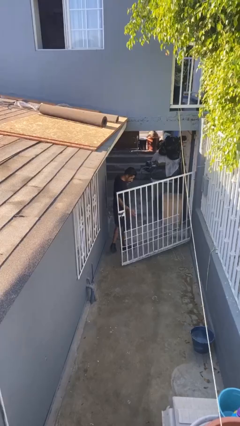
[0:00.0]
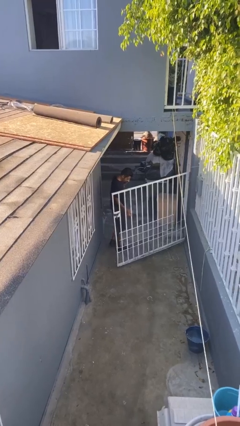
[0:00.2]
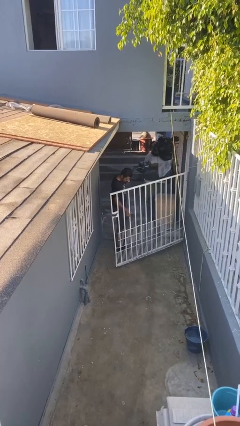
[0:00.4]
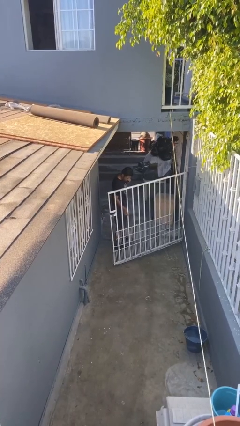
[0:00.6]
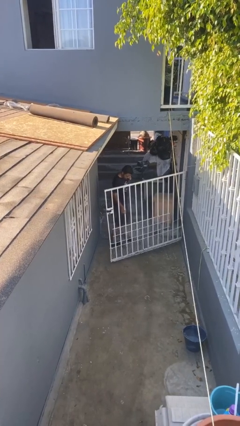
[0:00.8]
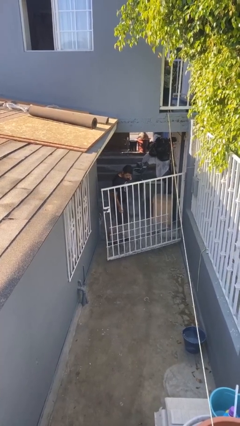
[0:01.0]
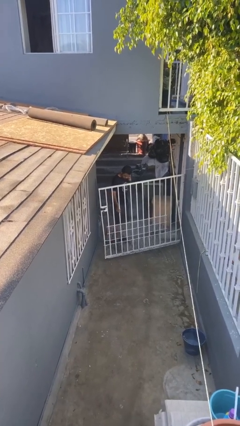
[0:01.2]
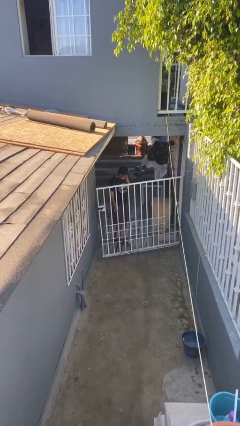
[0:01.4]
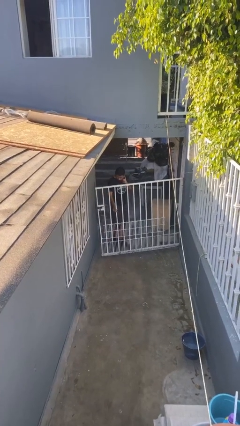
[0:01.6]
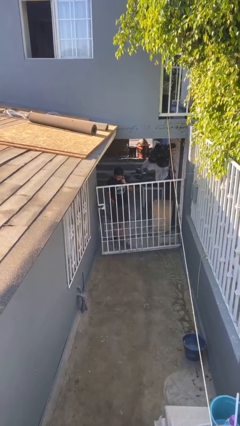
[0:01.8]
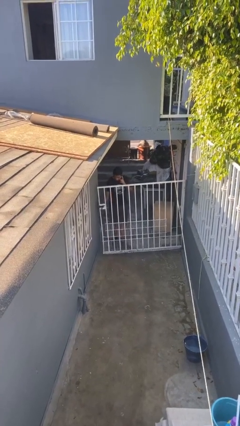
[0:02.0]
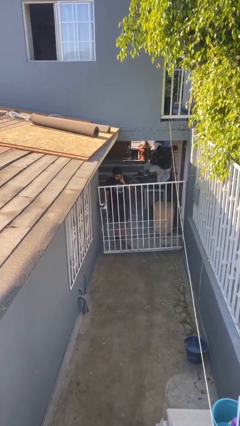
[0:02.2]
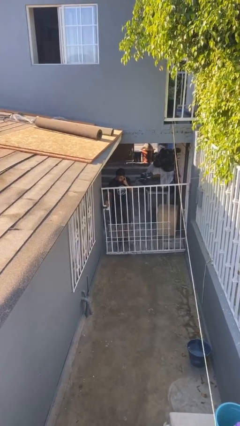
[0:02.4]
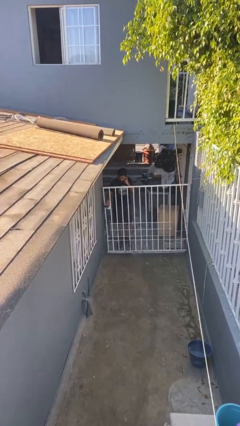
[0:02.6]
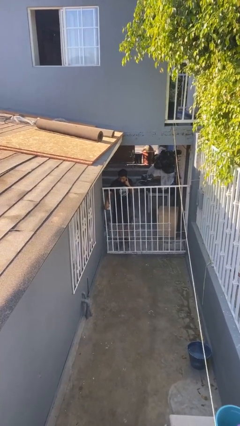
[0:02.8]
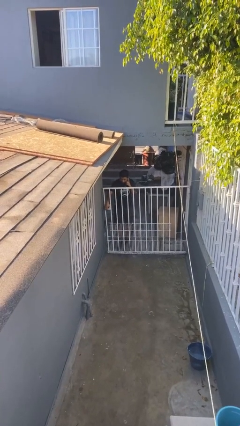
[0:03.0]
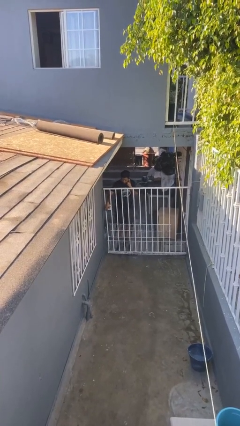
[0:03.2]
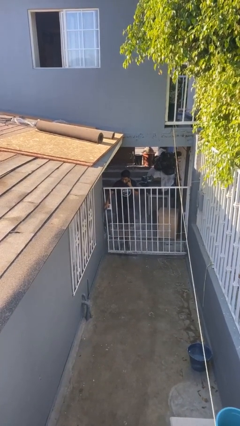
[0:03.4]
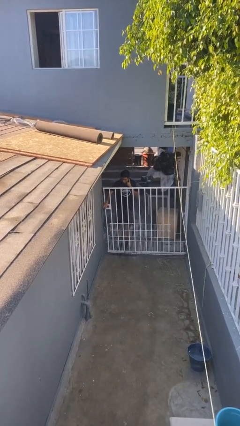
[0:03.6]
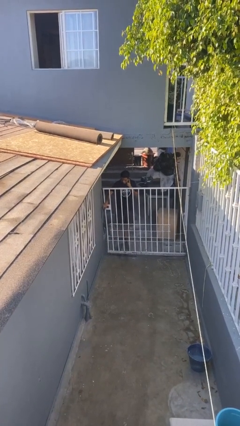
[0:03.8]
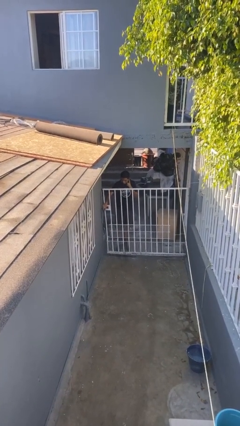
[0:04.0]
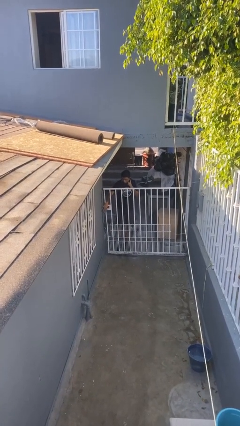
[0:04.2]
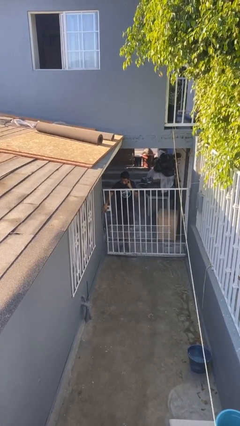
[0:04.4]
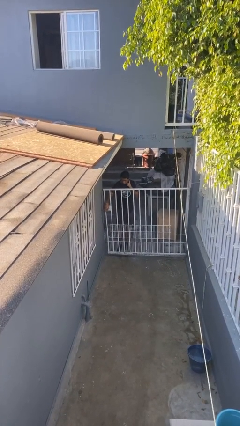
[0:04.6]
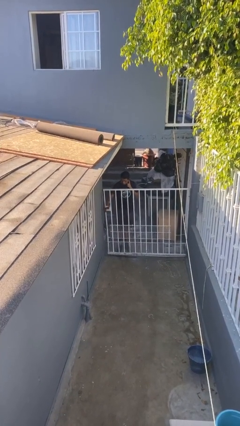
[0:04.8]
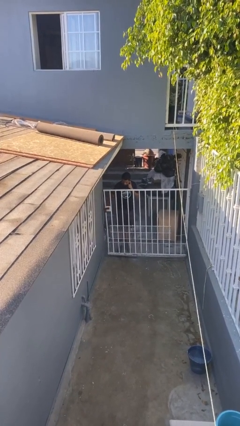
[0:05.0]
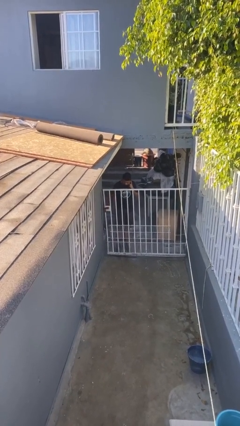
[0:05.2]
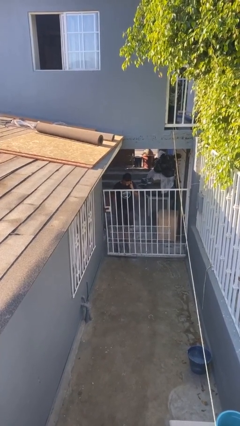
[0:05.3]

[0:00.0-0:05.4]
person closes facility door

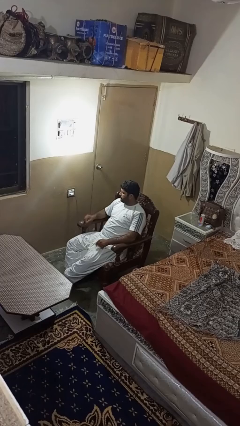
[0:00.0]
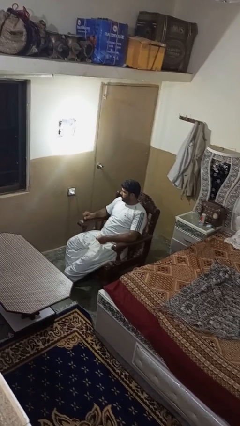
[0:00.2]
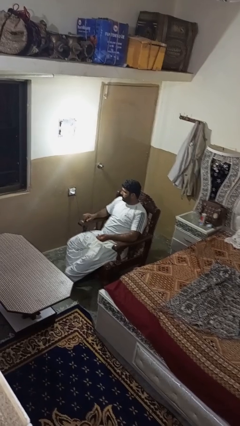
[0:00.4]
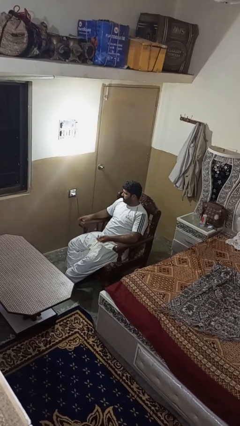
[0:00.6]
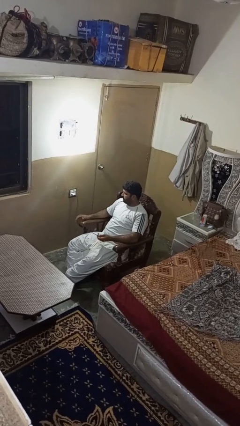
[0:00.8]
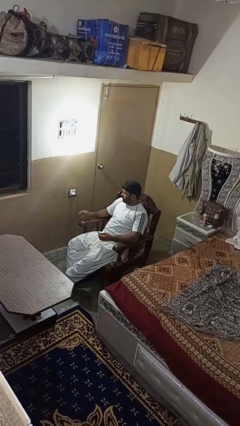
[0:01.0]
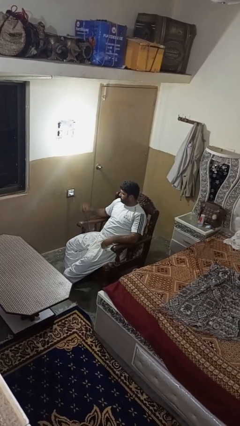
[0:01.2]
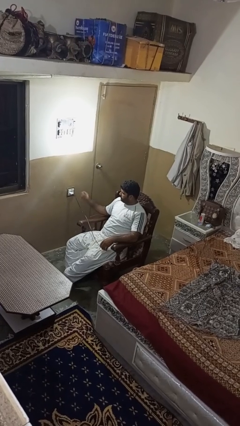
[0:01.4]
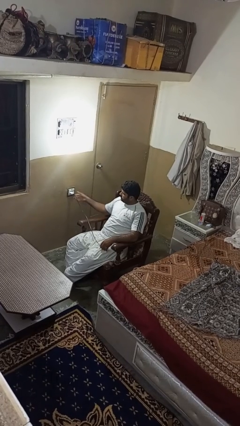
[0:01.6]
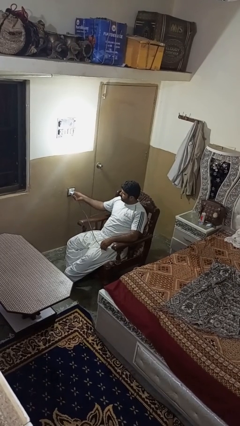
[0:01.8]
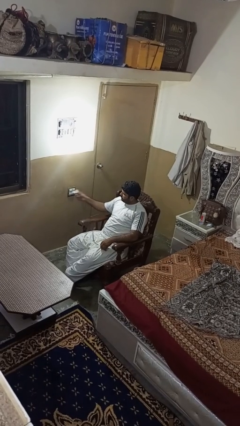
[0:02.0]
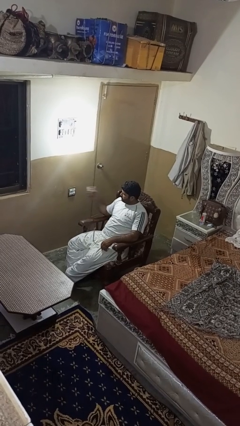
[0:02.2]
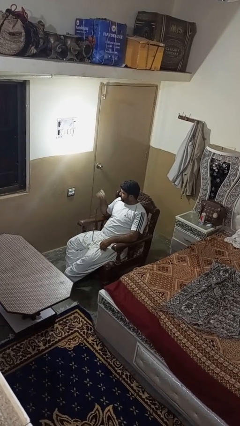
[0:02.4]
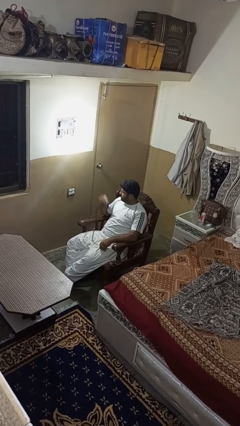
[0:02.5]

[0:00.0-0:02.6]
person unplugs from electrical socket

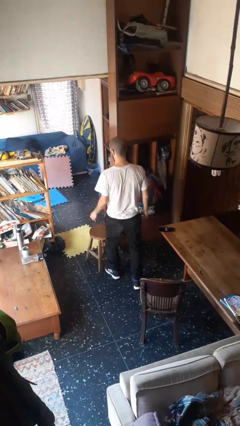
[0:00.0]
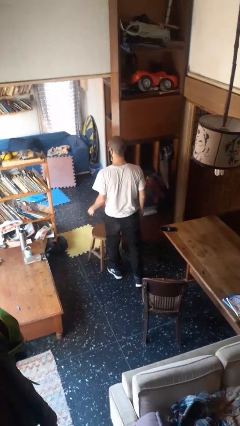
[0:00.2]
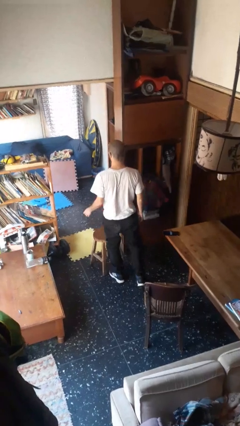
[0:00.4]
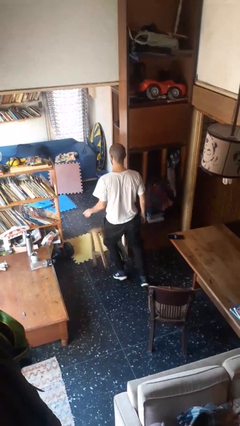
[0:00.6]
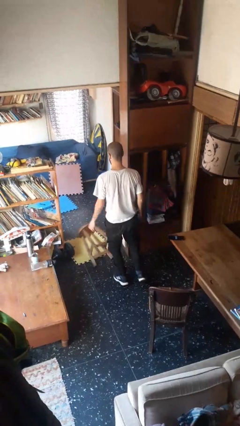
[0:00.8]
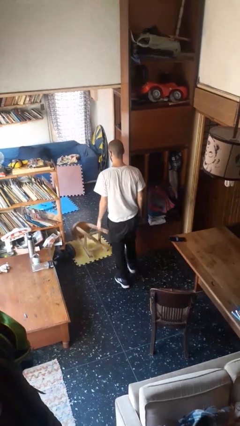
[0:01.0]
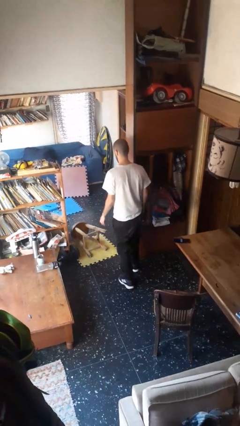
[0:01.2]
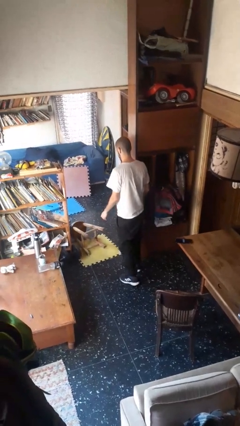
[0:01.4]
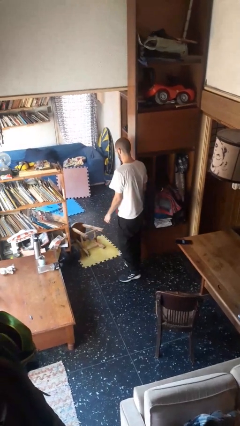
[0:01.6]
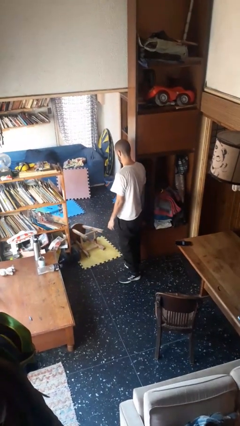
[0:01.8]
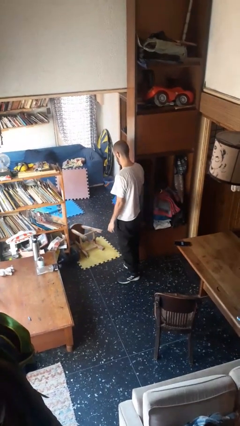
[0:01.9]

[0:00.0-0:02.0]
person knocks over furniture

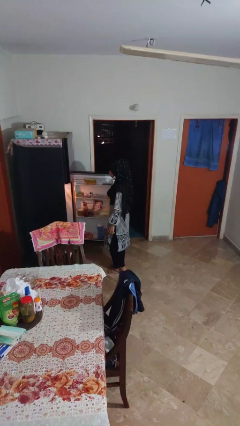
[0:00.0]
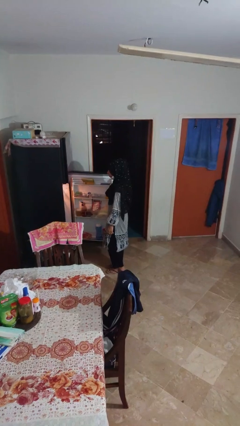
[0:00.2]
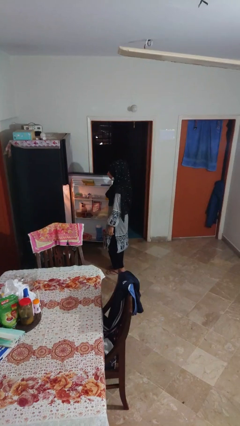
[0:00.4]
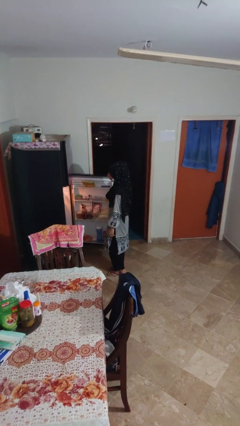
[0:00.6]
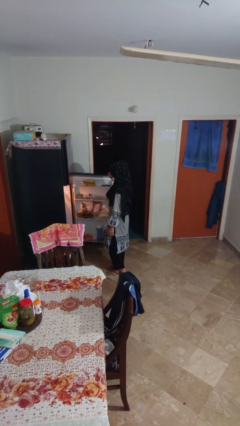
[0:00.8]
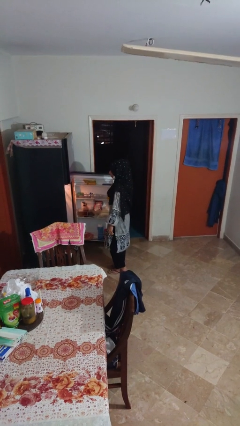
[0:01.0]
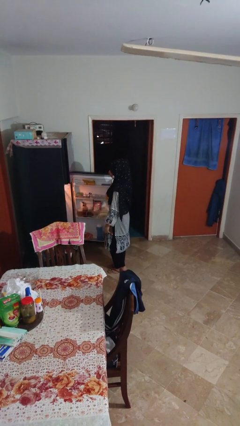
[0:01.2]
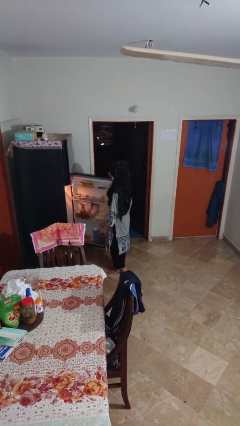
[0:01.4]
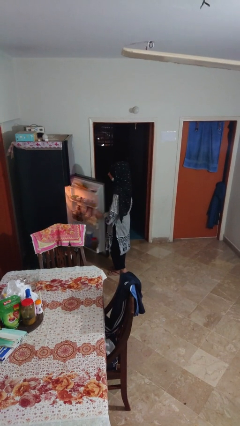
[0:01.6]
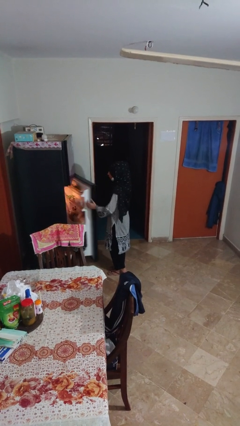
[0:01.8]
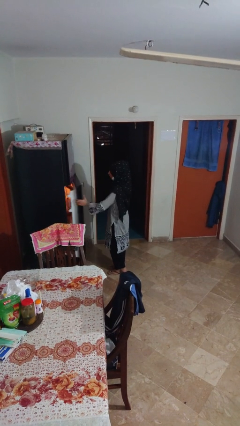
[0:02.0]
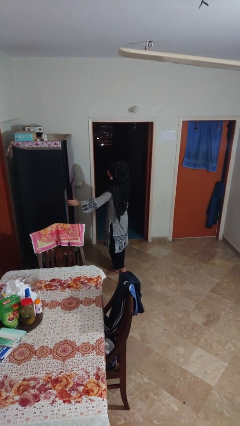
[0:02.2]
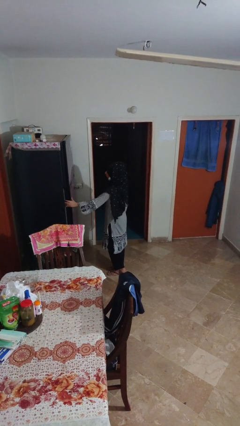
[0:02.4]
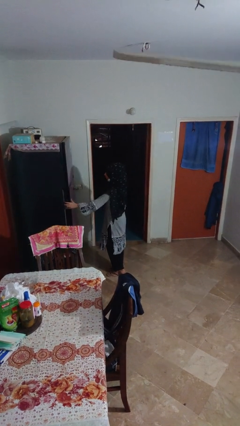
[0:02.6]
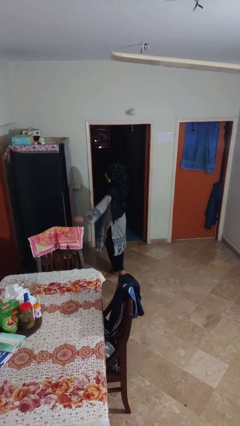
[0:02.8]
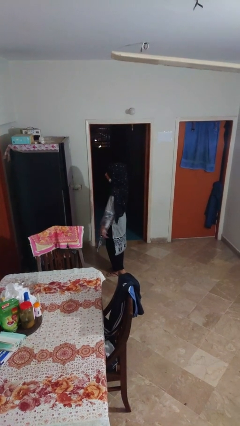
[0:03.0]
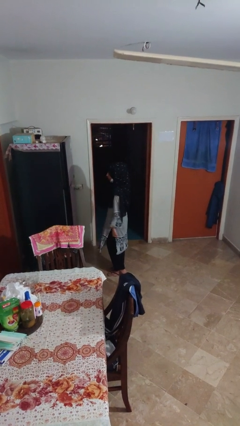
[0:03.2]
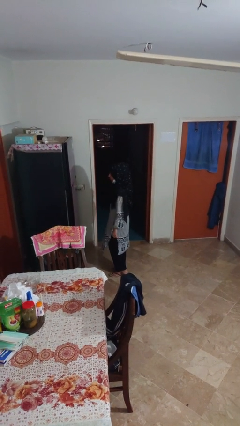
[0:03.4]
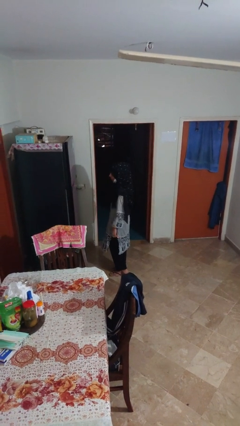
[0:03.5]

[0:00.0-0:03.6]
person closes refrigerator

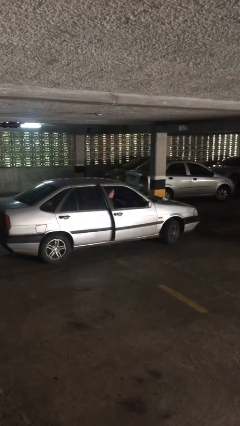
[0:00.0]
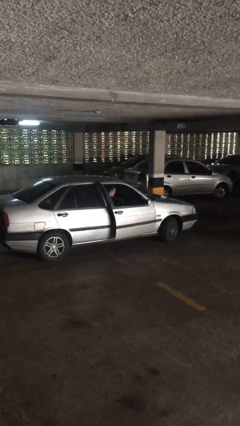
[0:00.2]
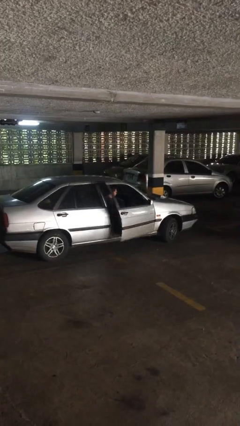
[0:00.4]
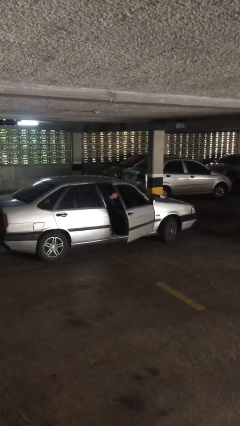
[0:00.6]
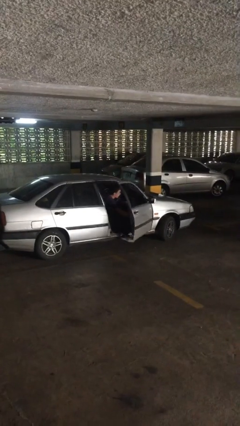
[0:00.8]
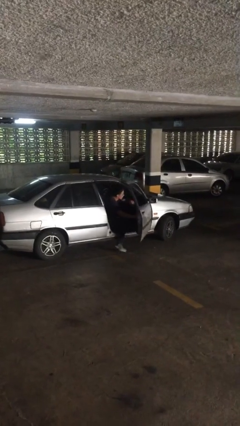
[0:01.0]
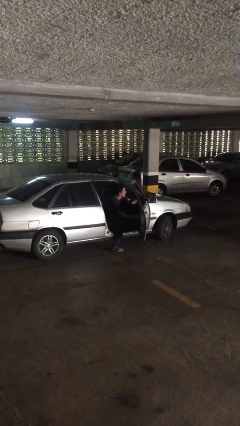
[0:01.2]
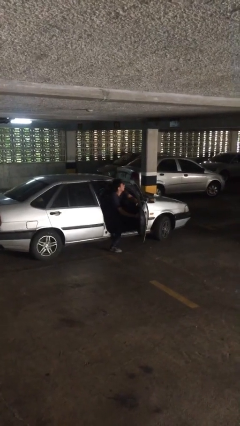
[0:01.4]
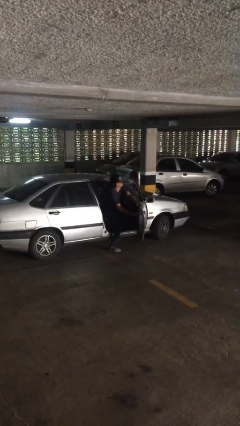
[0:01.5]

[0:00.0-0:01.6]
person opens car door

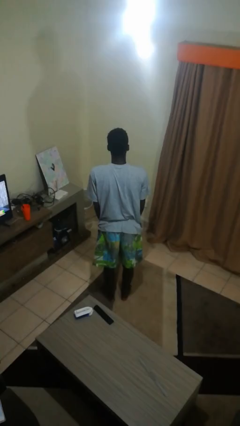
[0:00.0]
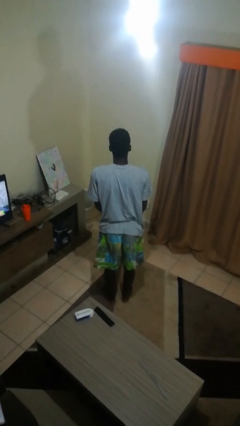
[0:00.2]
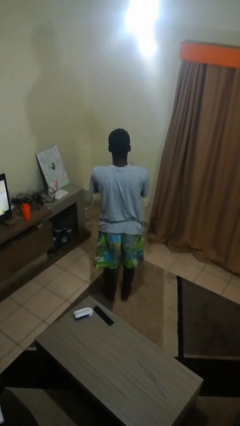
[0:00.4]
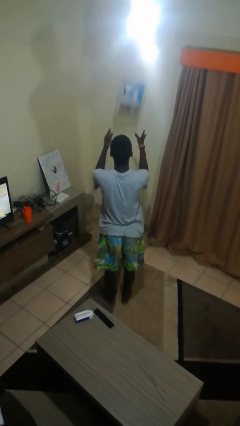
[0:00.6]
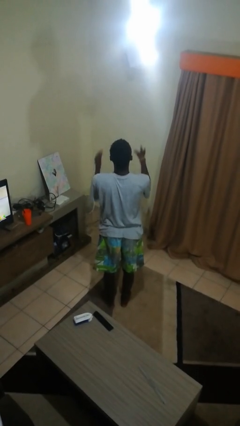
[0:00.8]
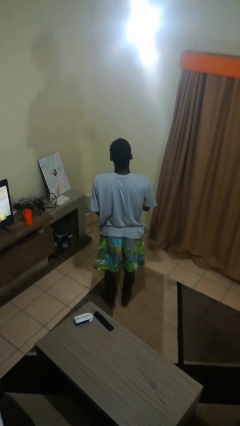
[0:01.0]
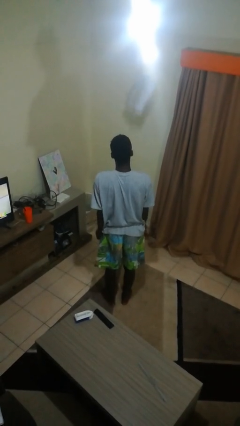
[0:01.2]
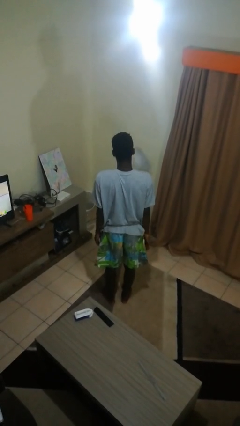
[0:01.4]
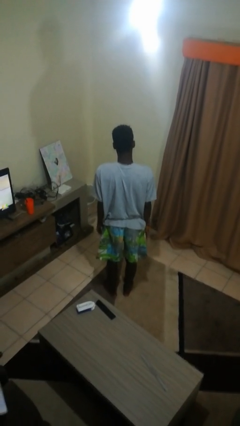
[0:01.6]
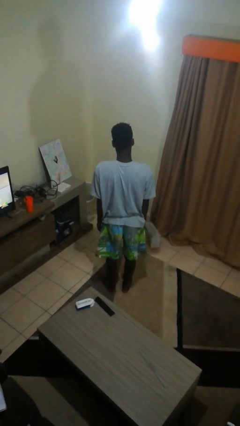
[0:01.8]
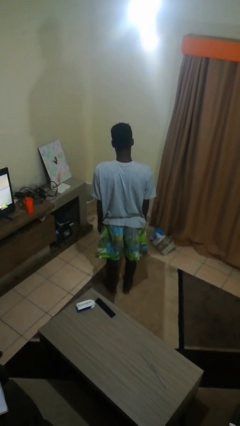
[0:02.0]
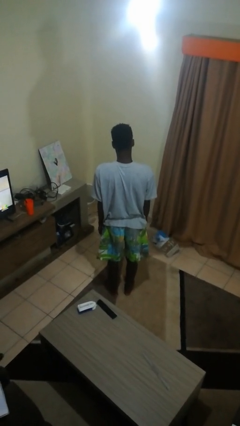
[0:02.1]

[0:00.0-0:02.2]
person throws object into air
